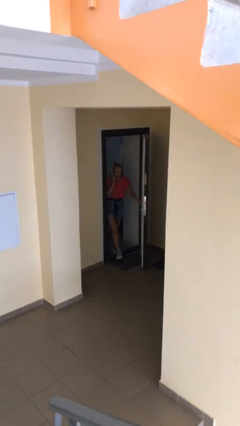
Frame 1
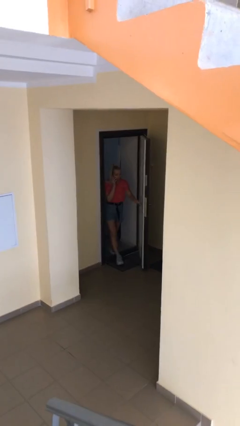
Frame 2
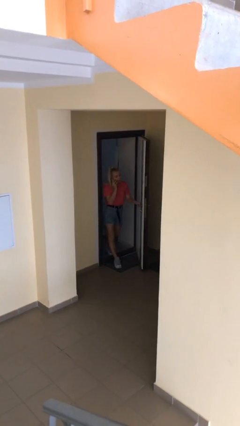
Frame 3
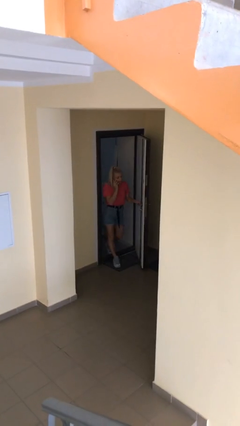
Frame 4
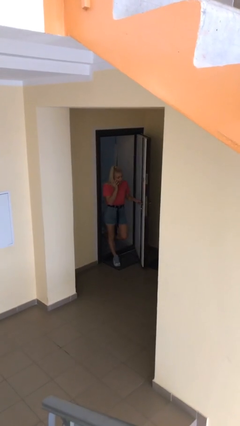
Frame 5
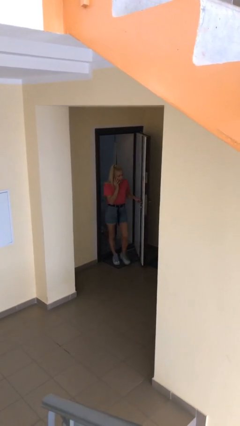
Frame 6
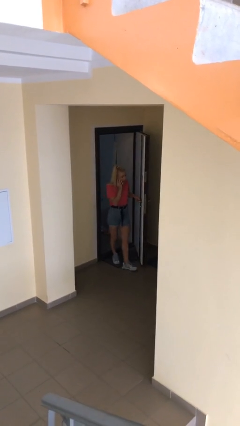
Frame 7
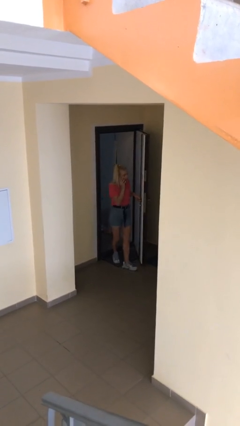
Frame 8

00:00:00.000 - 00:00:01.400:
person enters scene through structure

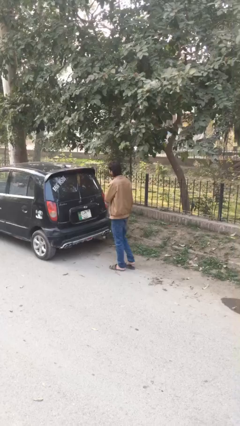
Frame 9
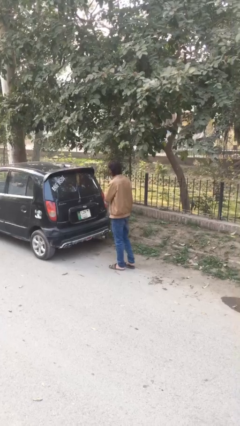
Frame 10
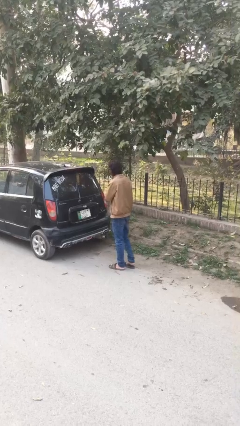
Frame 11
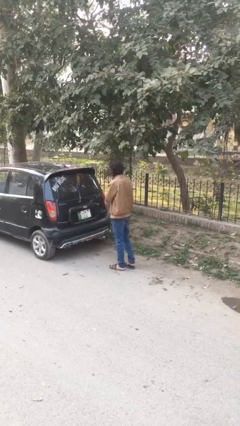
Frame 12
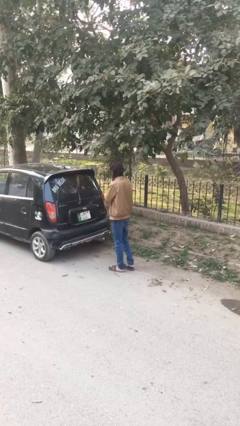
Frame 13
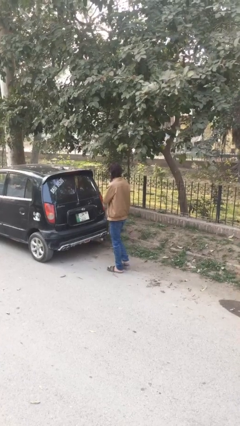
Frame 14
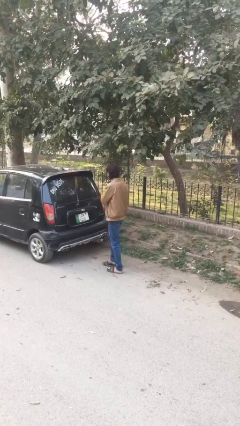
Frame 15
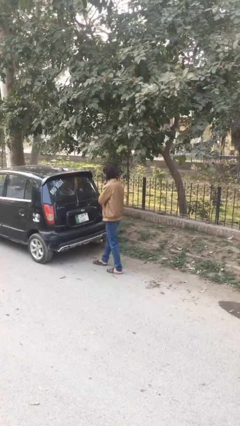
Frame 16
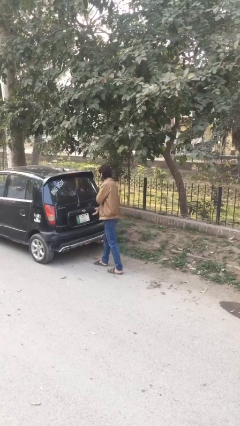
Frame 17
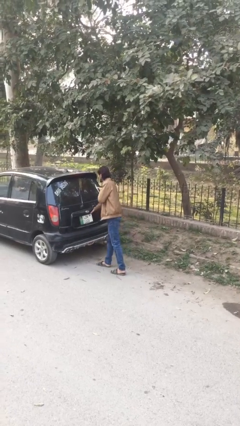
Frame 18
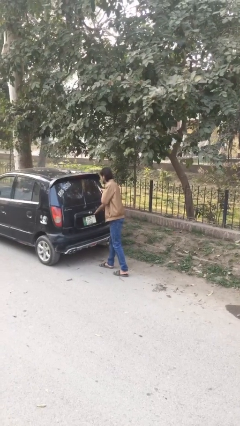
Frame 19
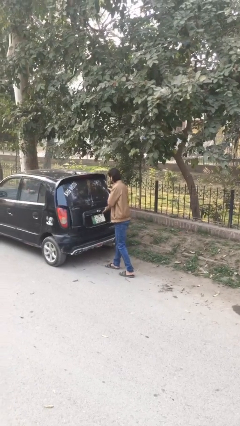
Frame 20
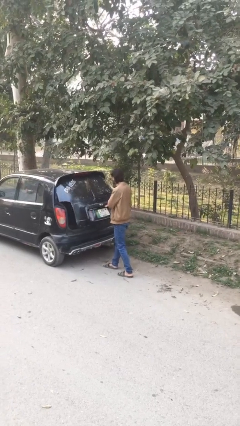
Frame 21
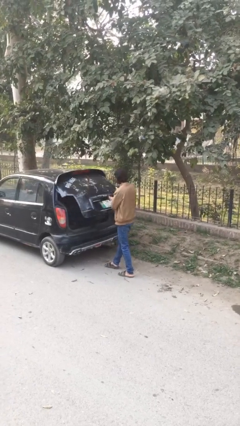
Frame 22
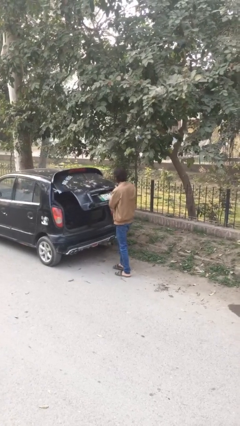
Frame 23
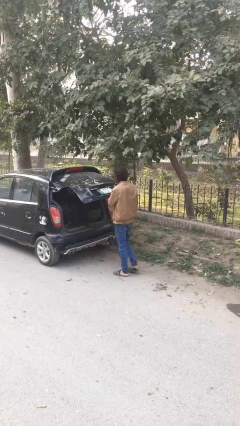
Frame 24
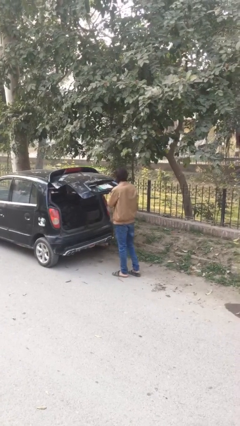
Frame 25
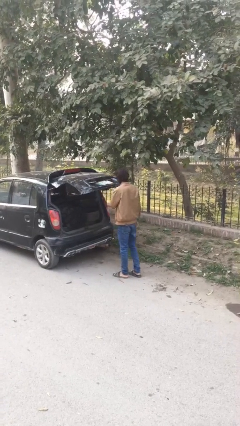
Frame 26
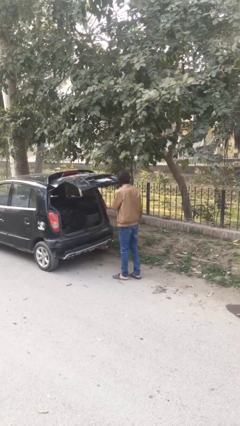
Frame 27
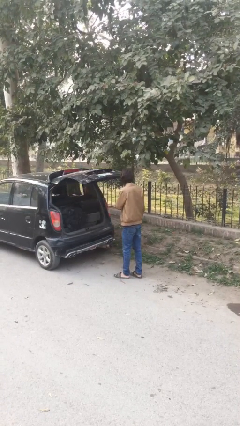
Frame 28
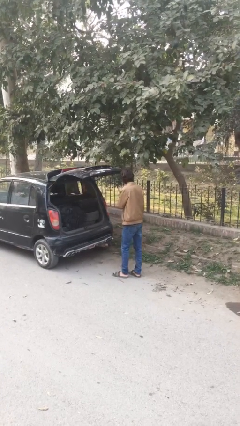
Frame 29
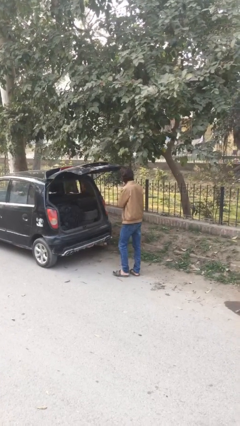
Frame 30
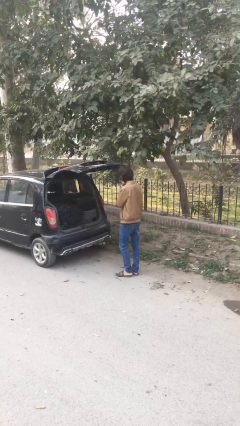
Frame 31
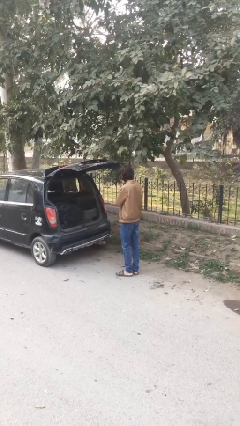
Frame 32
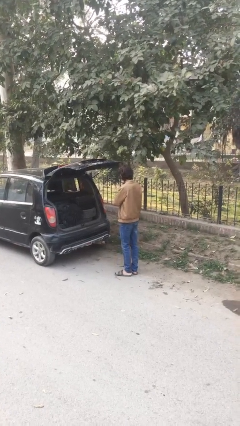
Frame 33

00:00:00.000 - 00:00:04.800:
person opens car trunk

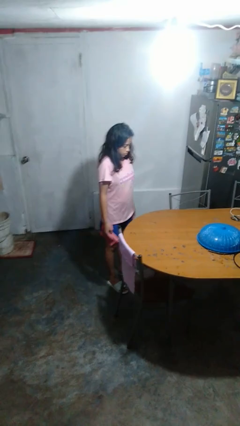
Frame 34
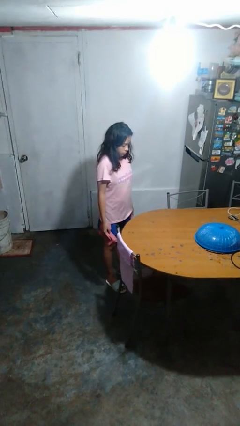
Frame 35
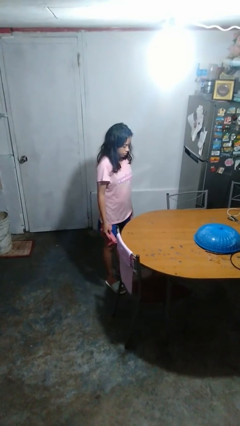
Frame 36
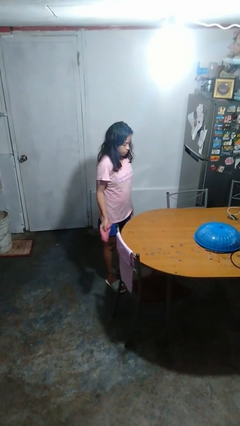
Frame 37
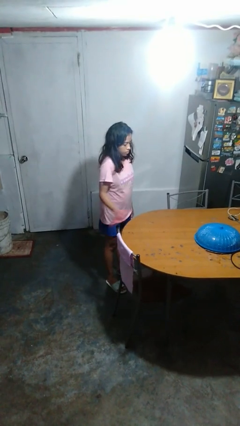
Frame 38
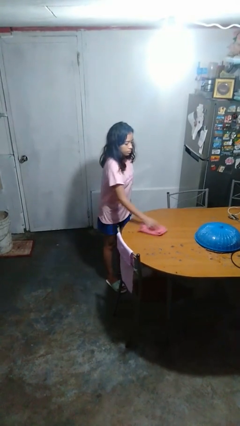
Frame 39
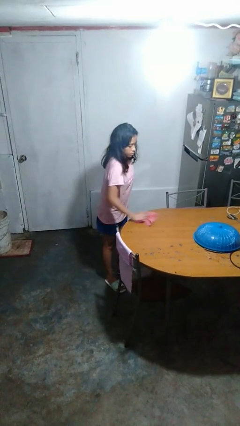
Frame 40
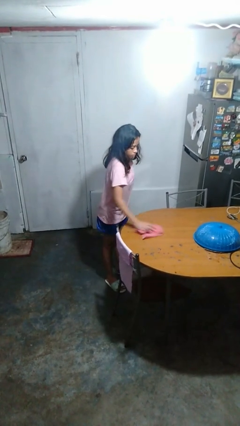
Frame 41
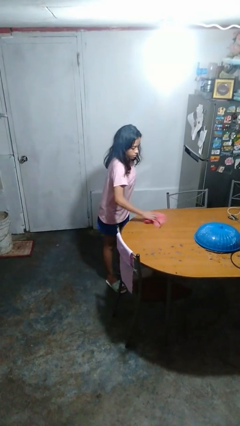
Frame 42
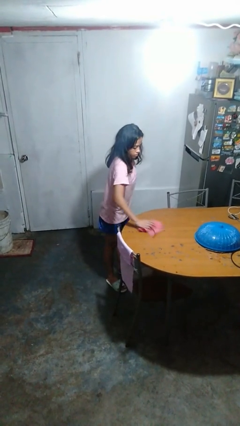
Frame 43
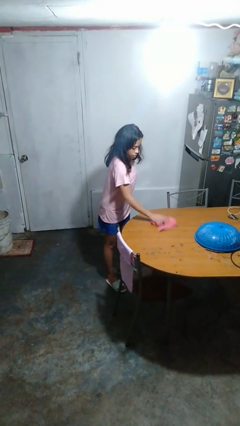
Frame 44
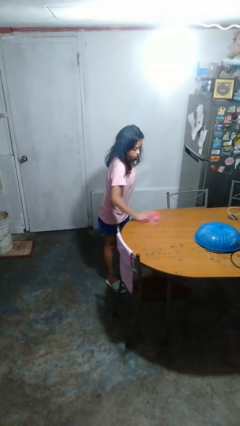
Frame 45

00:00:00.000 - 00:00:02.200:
person cleans table with rag

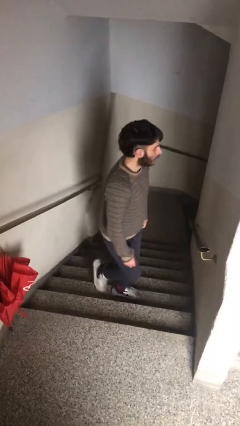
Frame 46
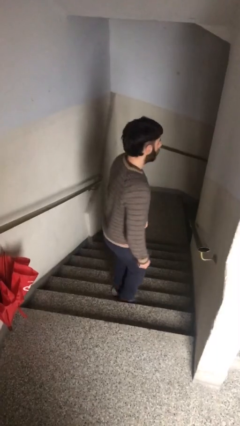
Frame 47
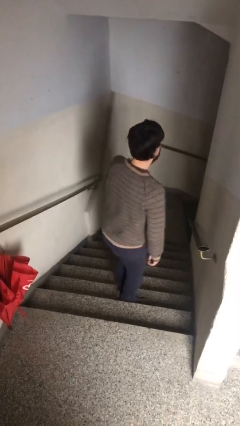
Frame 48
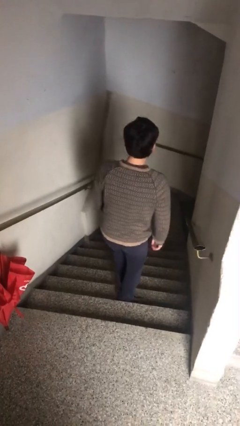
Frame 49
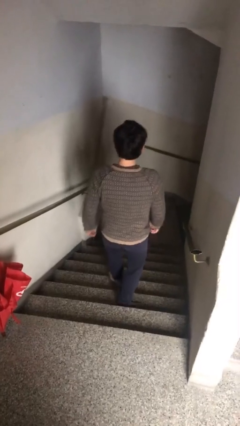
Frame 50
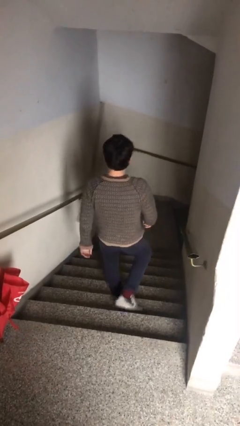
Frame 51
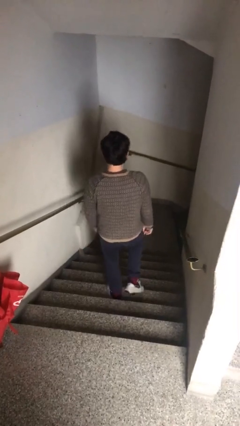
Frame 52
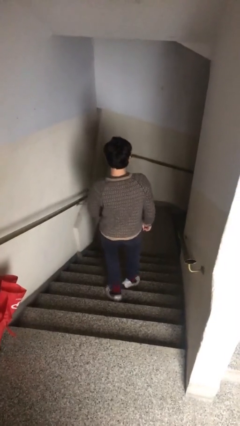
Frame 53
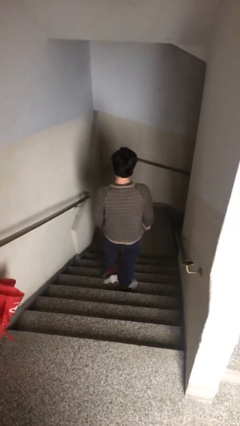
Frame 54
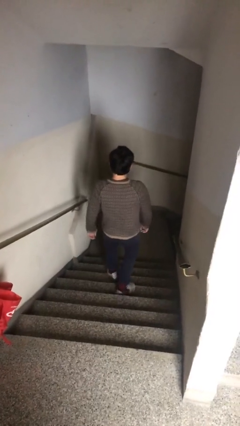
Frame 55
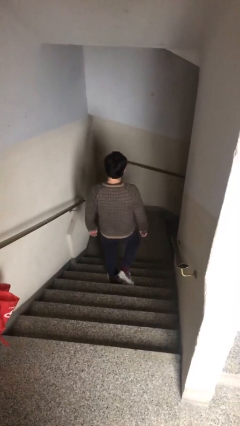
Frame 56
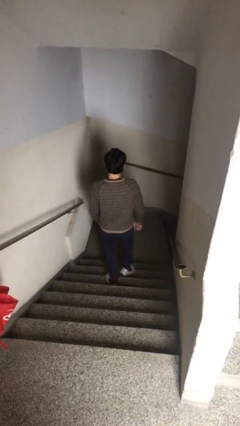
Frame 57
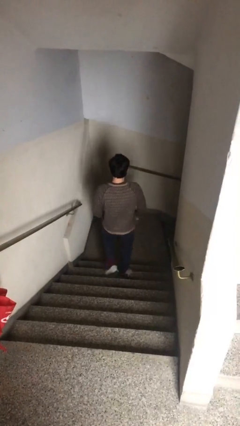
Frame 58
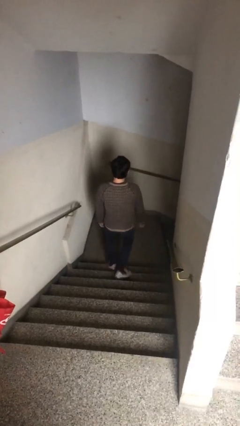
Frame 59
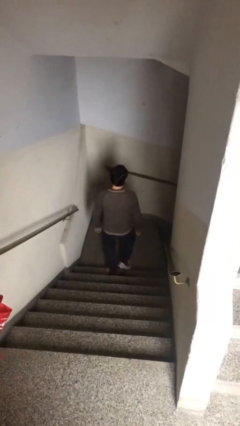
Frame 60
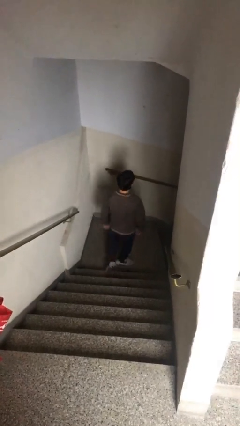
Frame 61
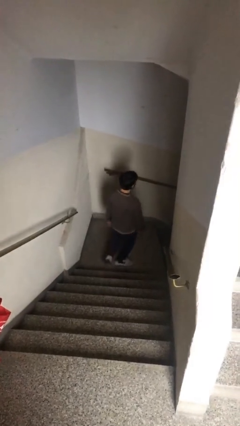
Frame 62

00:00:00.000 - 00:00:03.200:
person climbs down stairs

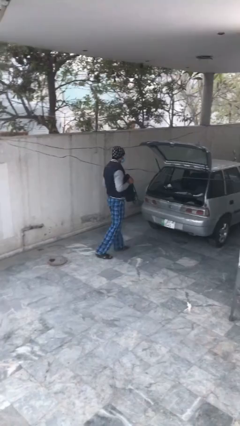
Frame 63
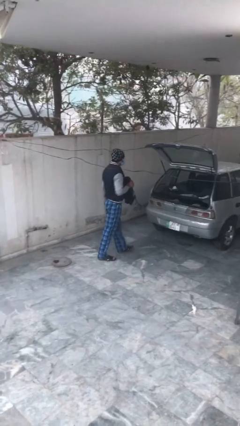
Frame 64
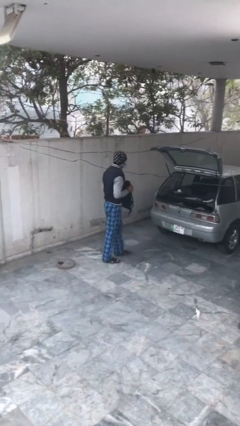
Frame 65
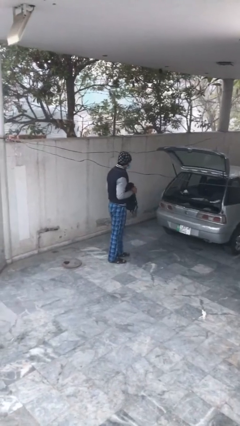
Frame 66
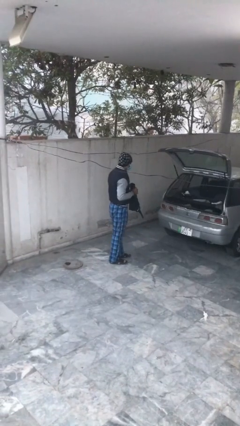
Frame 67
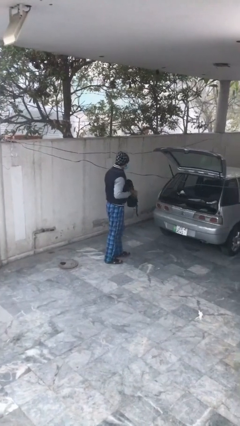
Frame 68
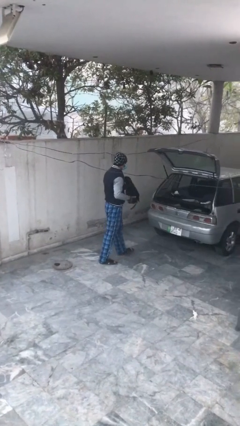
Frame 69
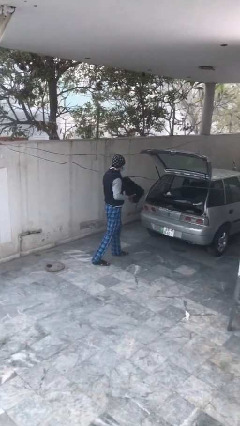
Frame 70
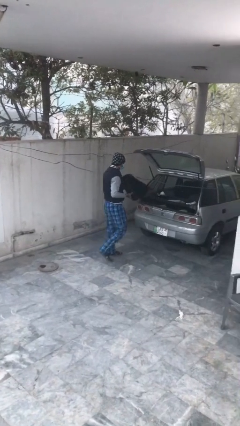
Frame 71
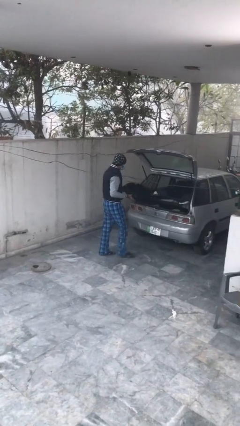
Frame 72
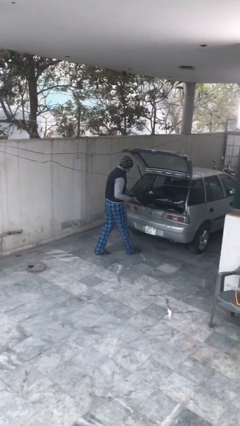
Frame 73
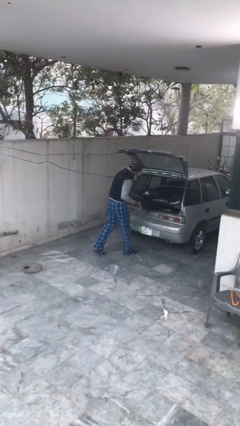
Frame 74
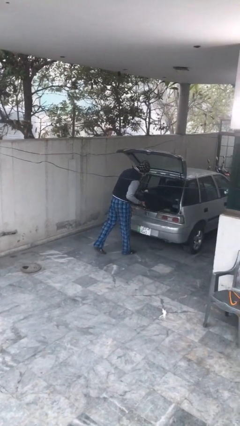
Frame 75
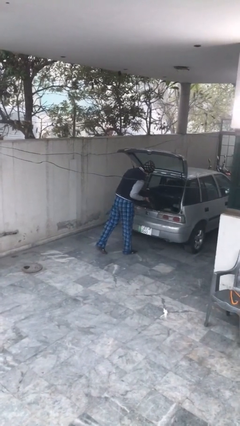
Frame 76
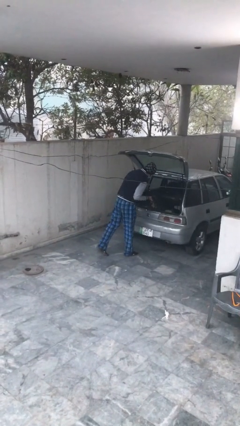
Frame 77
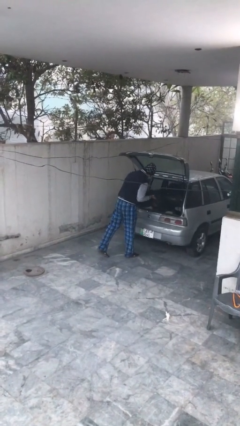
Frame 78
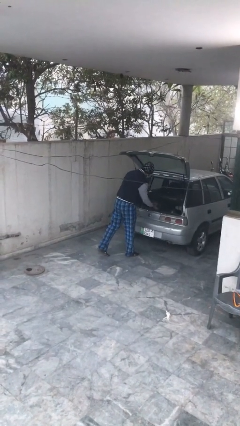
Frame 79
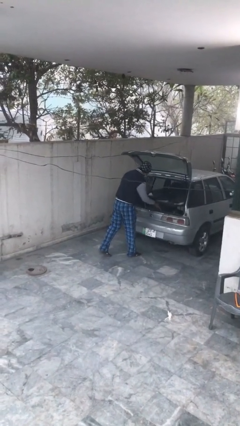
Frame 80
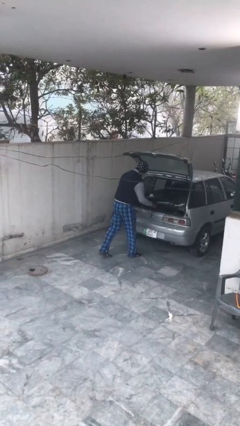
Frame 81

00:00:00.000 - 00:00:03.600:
person loads car

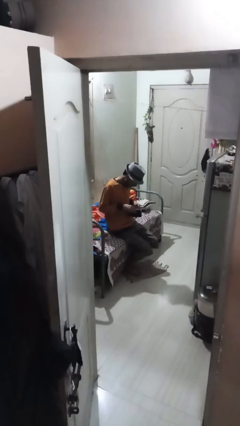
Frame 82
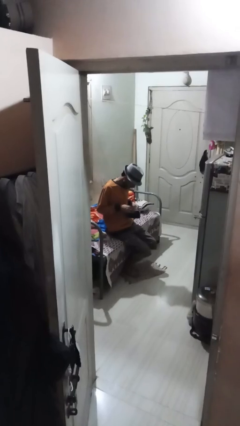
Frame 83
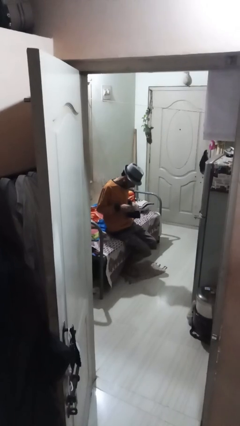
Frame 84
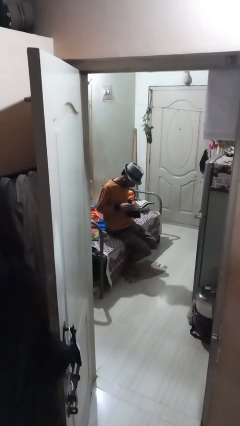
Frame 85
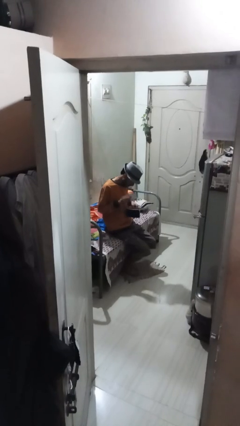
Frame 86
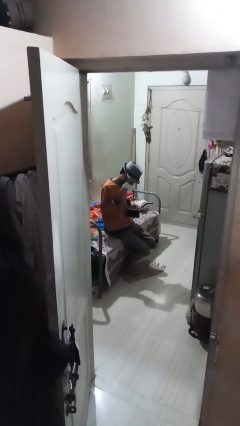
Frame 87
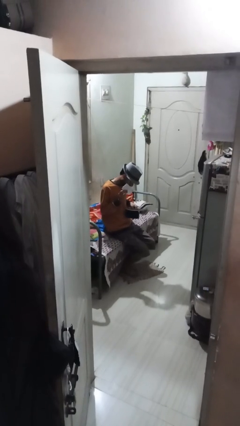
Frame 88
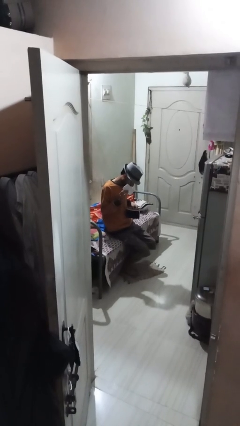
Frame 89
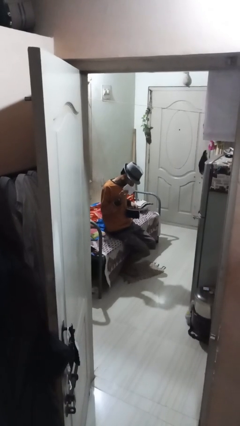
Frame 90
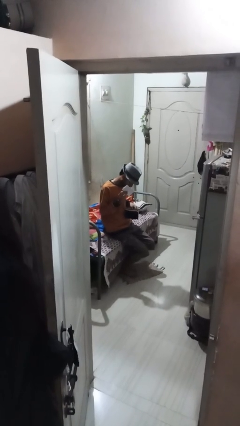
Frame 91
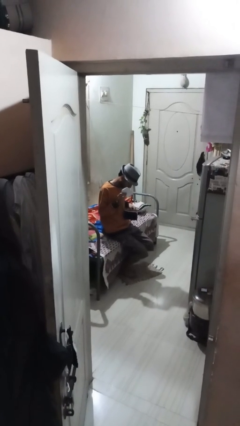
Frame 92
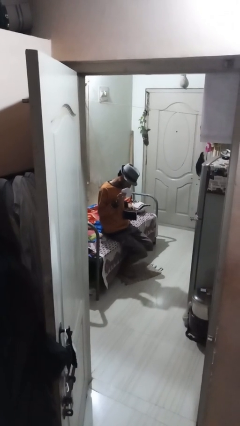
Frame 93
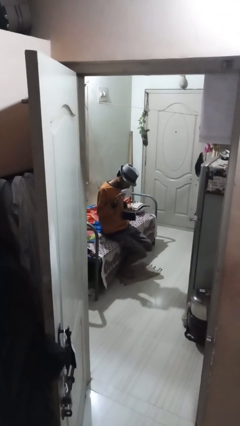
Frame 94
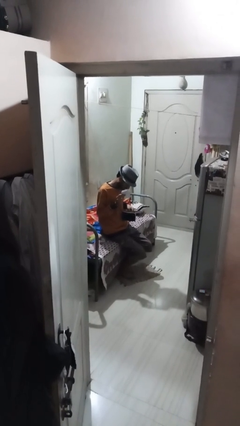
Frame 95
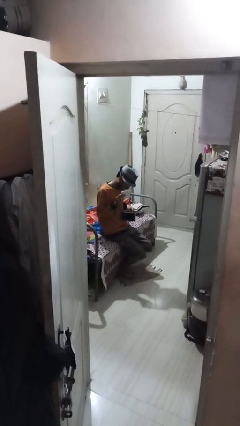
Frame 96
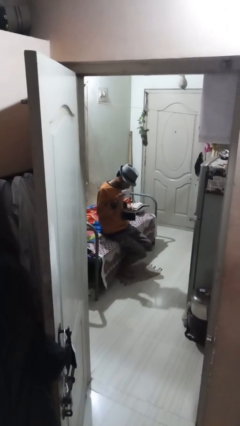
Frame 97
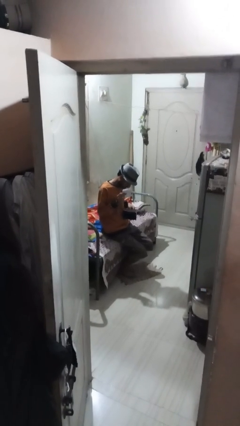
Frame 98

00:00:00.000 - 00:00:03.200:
person takes object from purse
